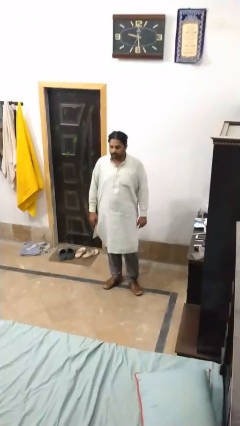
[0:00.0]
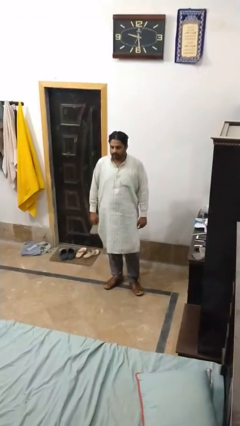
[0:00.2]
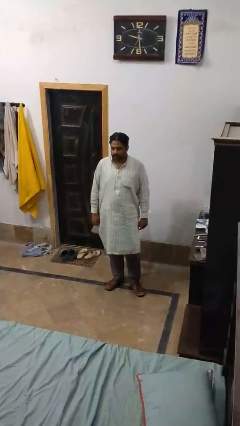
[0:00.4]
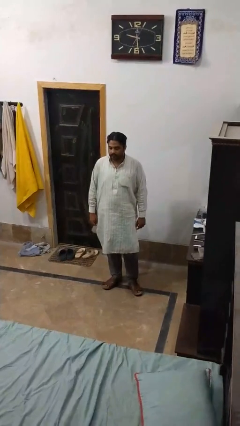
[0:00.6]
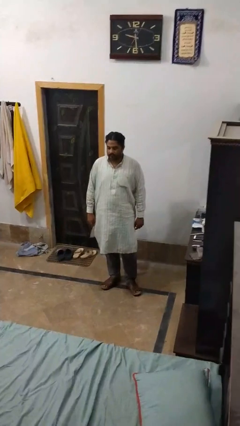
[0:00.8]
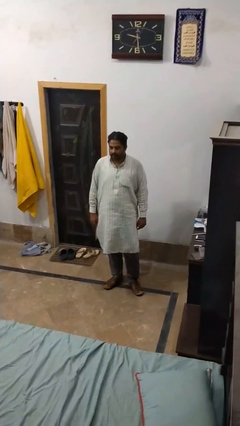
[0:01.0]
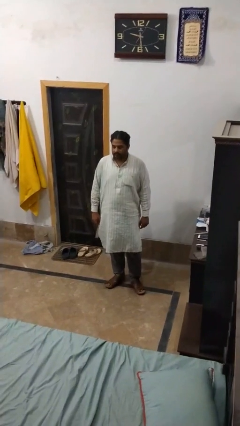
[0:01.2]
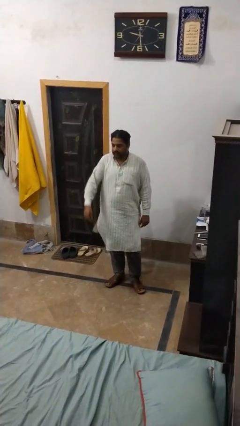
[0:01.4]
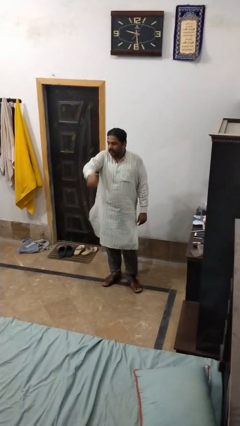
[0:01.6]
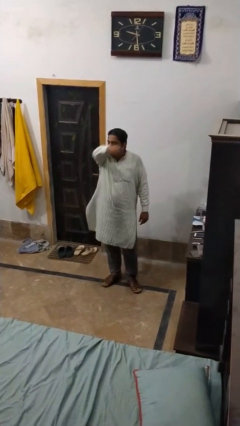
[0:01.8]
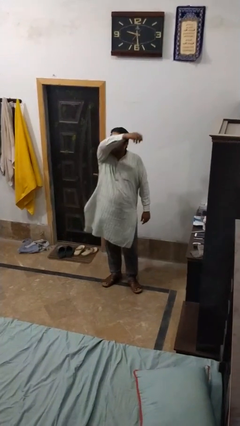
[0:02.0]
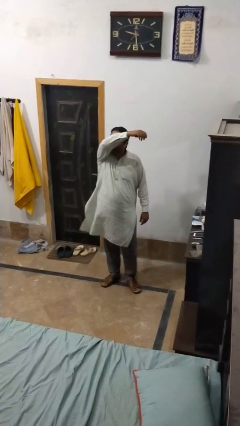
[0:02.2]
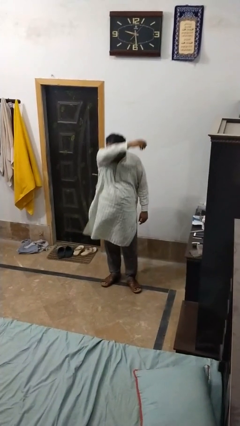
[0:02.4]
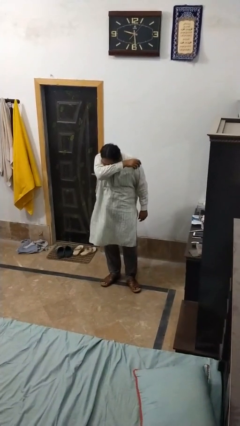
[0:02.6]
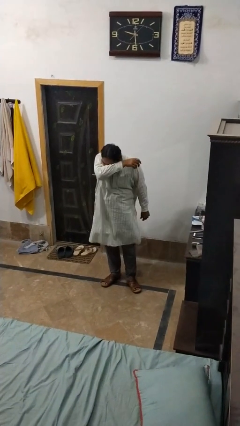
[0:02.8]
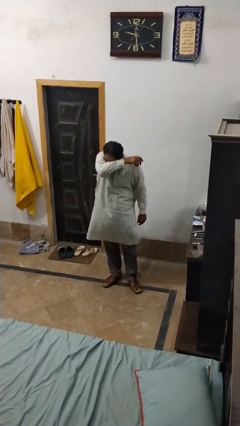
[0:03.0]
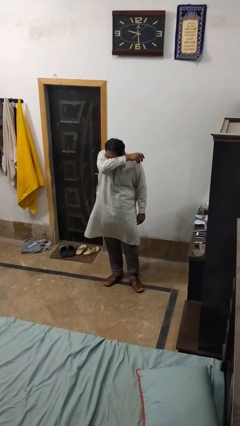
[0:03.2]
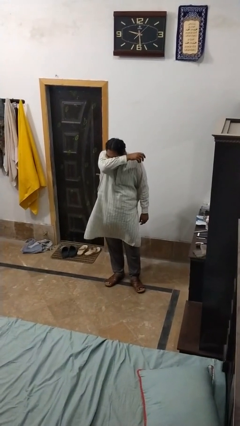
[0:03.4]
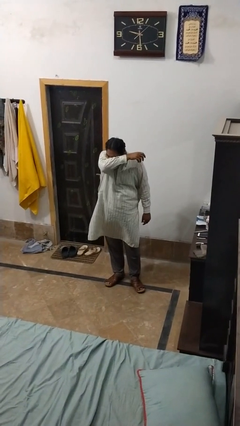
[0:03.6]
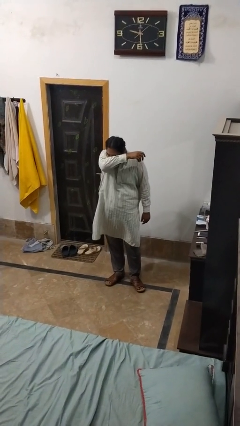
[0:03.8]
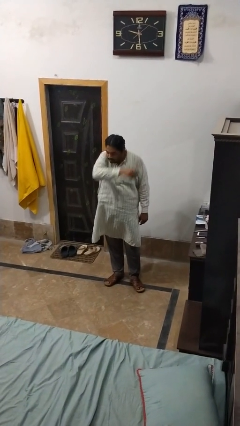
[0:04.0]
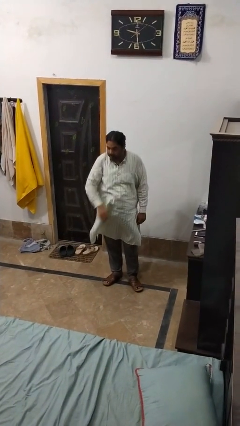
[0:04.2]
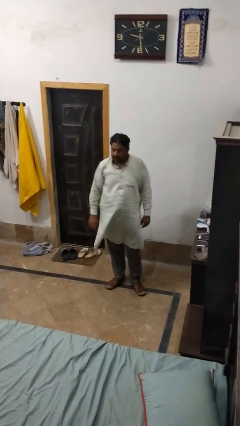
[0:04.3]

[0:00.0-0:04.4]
person sneezes into arm

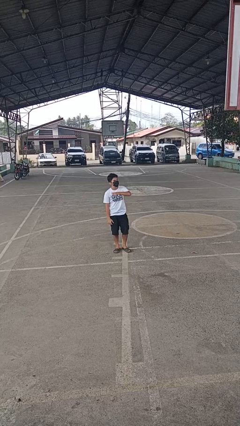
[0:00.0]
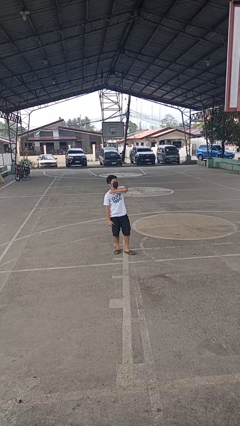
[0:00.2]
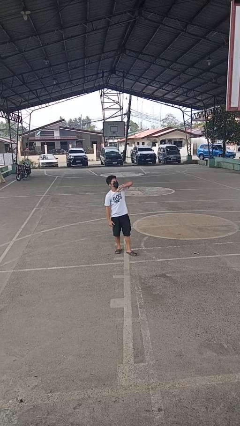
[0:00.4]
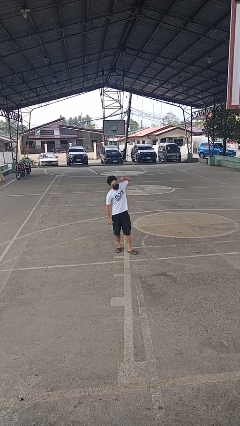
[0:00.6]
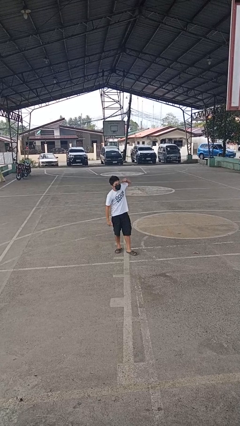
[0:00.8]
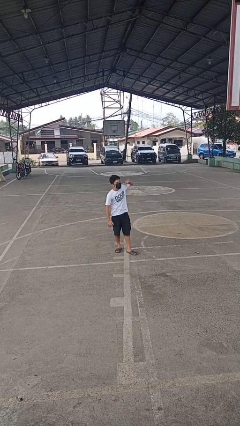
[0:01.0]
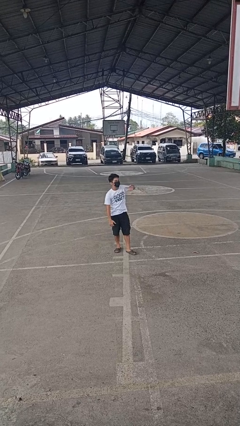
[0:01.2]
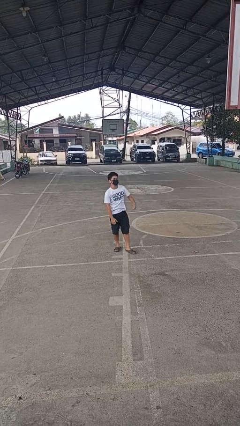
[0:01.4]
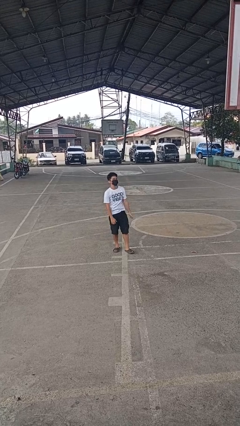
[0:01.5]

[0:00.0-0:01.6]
person gestures cut

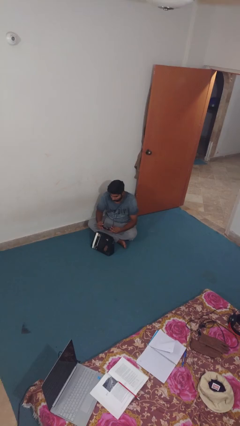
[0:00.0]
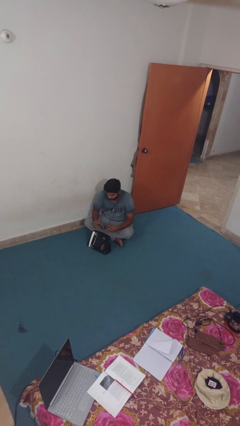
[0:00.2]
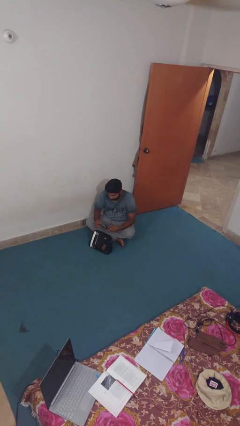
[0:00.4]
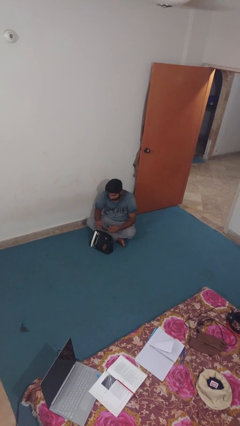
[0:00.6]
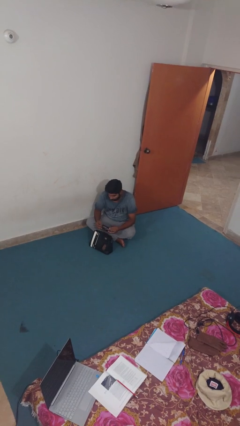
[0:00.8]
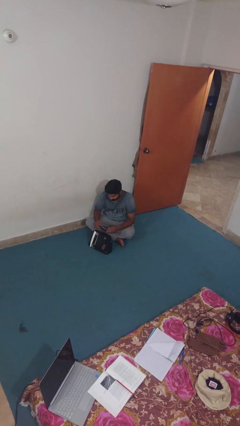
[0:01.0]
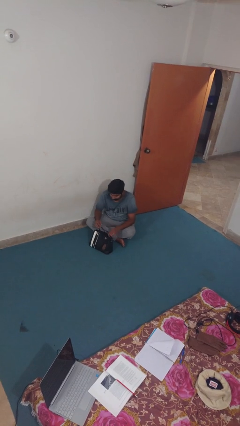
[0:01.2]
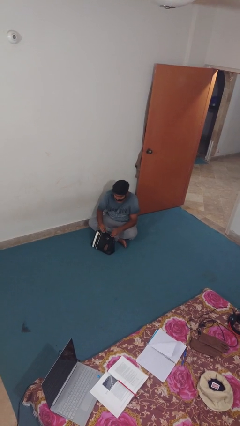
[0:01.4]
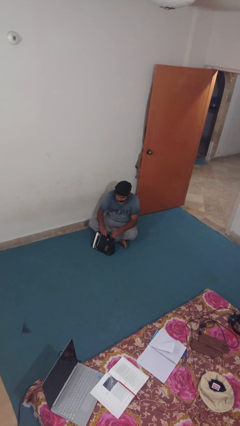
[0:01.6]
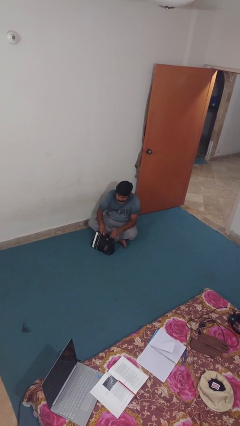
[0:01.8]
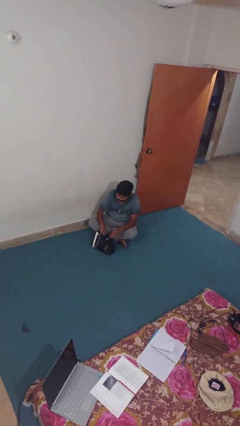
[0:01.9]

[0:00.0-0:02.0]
person puts object into purse

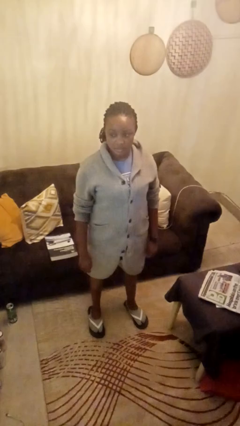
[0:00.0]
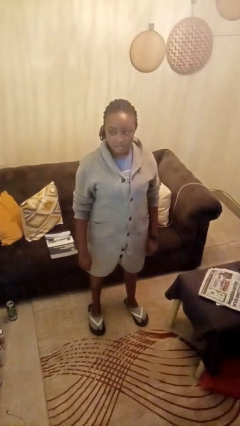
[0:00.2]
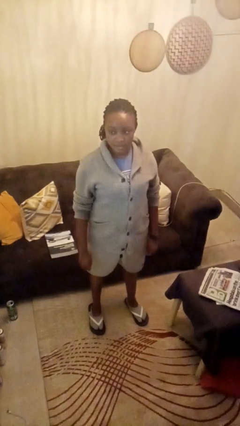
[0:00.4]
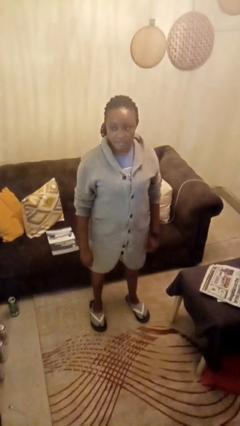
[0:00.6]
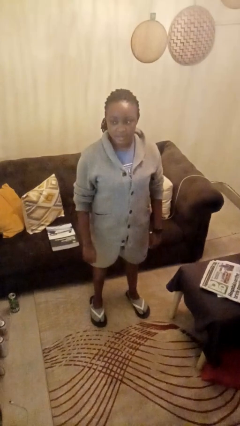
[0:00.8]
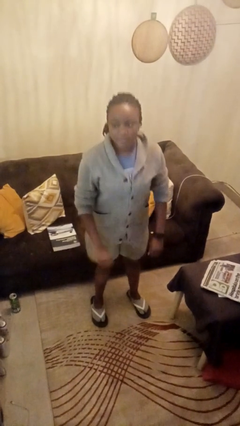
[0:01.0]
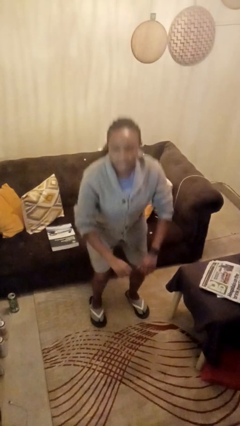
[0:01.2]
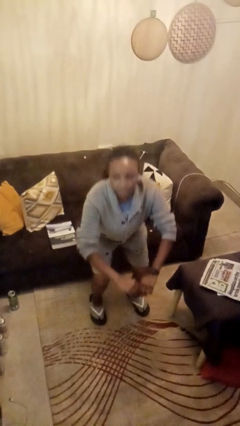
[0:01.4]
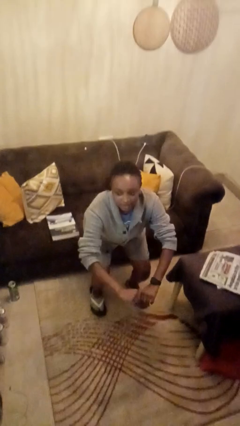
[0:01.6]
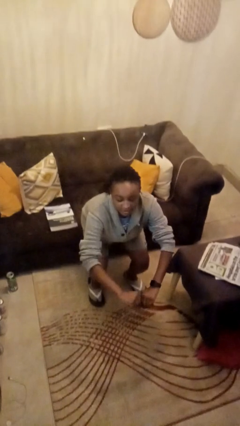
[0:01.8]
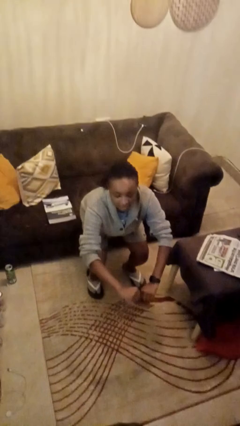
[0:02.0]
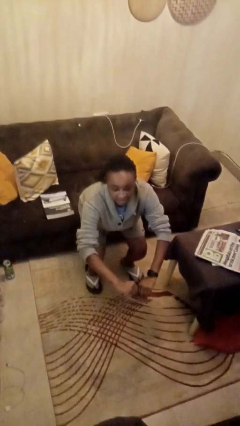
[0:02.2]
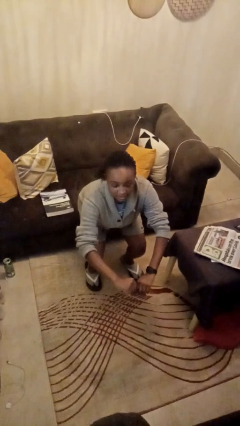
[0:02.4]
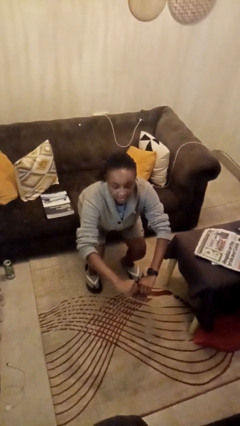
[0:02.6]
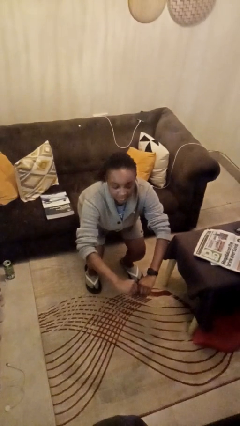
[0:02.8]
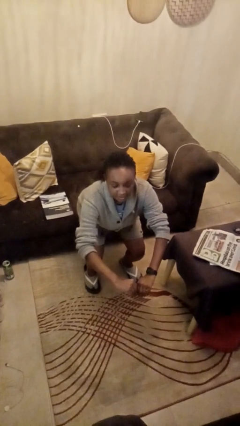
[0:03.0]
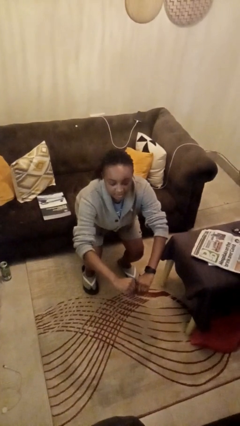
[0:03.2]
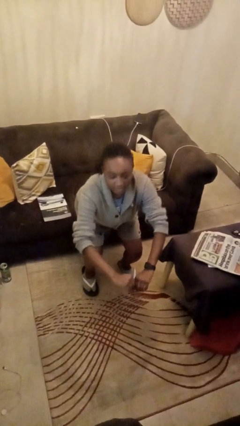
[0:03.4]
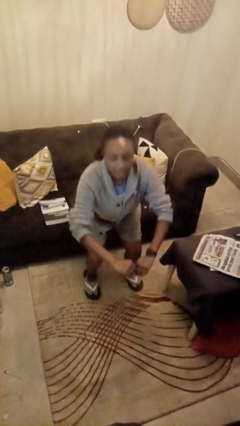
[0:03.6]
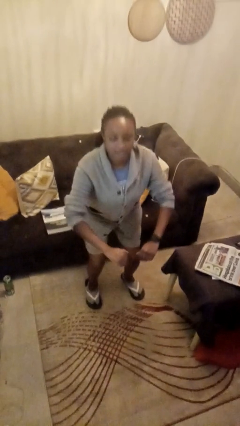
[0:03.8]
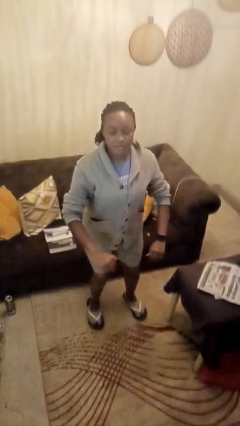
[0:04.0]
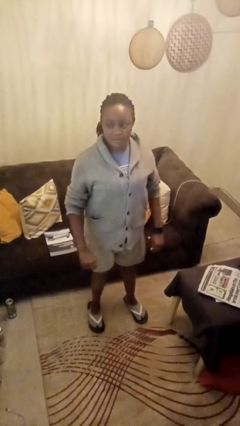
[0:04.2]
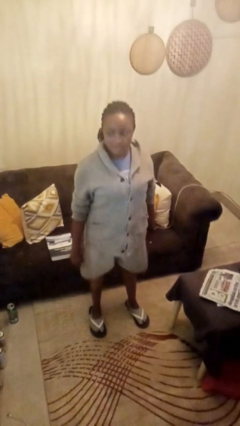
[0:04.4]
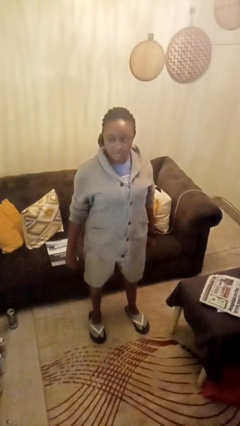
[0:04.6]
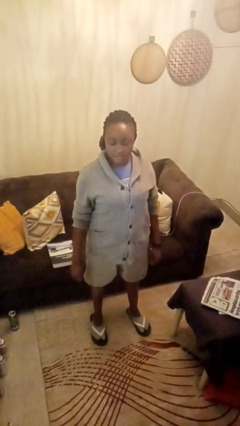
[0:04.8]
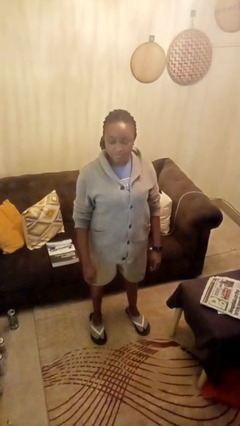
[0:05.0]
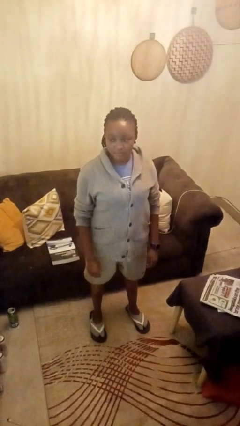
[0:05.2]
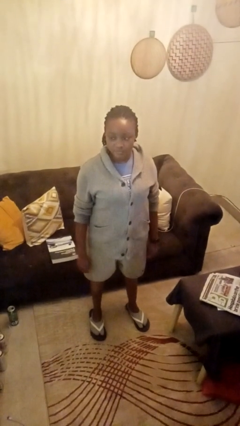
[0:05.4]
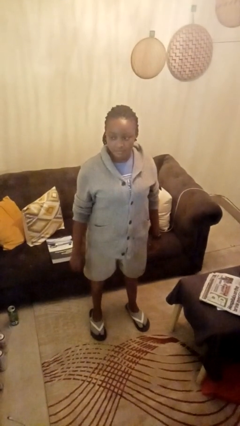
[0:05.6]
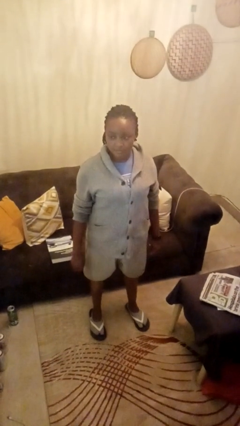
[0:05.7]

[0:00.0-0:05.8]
person squats

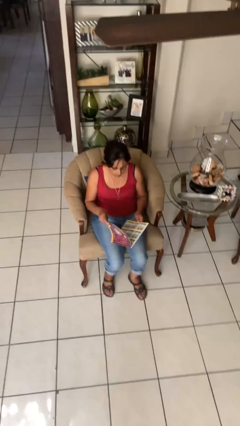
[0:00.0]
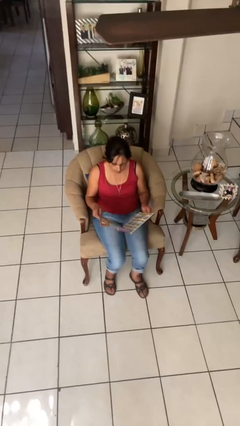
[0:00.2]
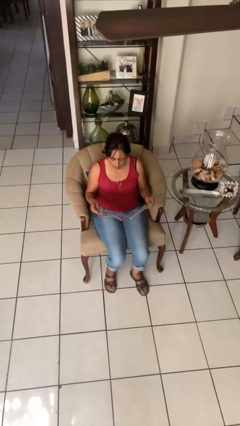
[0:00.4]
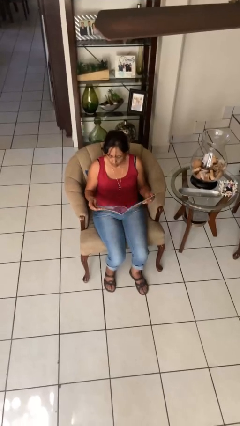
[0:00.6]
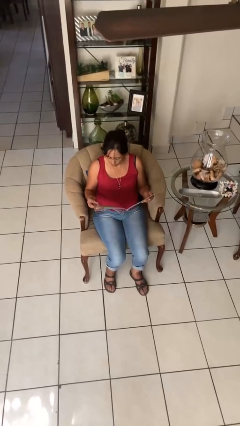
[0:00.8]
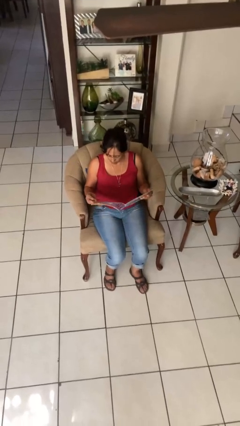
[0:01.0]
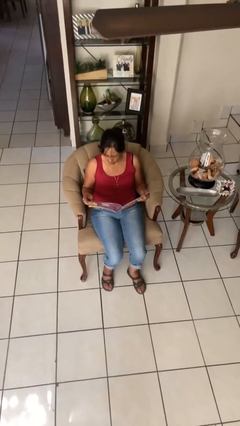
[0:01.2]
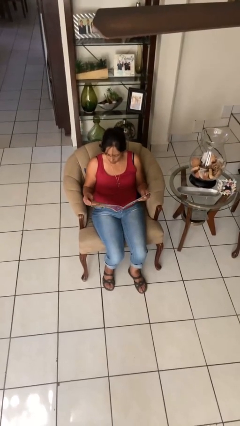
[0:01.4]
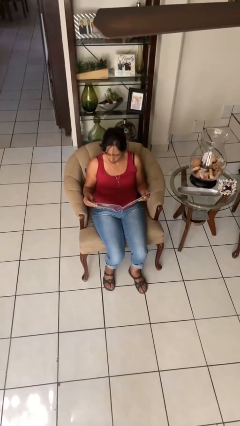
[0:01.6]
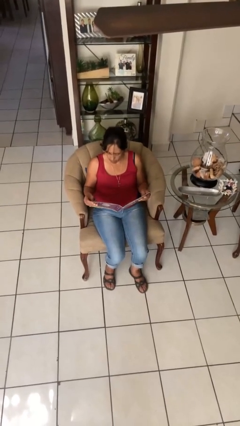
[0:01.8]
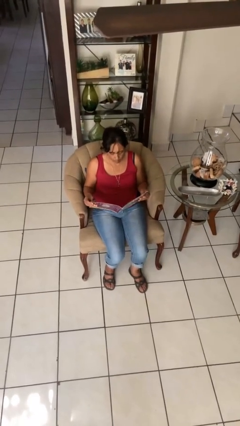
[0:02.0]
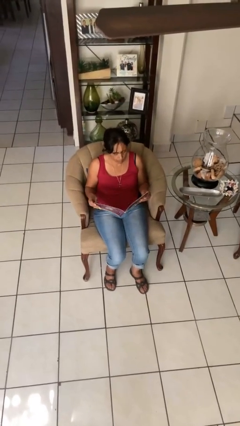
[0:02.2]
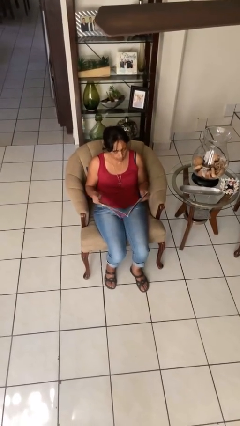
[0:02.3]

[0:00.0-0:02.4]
person reads magazine

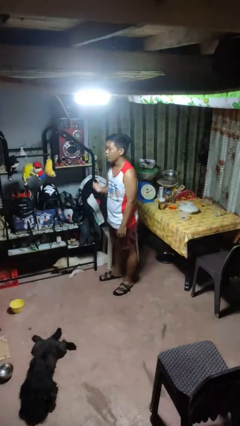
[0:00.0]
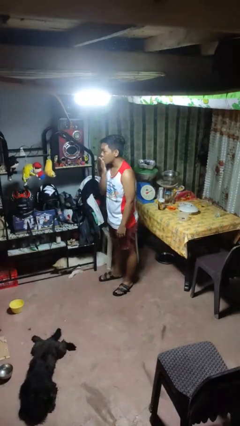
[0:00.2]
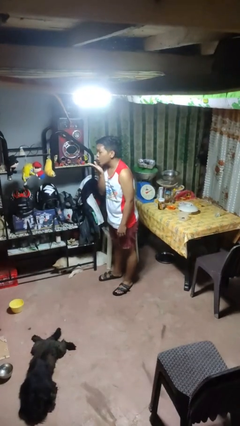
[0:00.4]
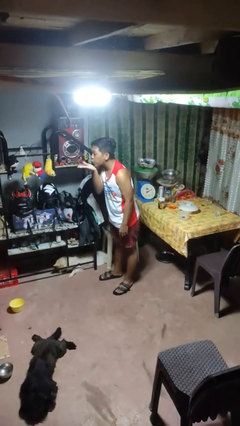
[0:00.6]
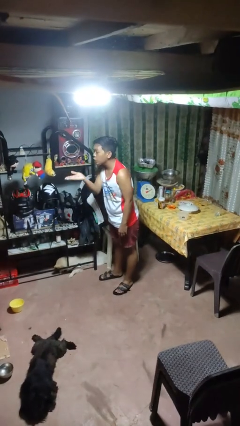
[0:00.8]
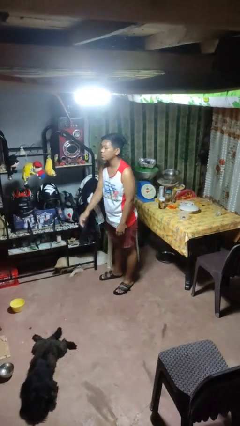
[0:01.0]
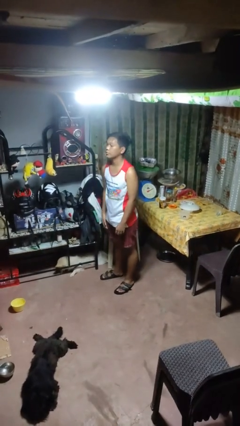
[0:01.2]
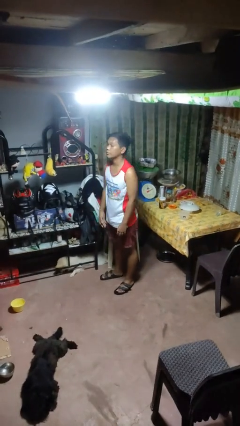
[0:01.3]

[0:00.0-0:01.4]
person gestures blow kiss
